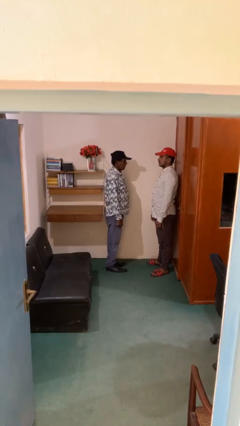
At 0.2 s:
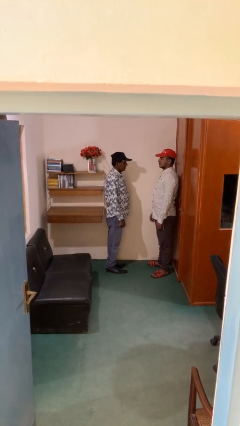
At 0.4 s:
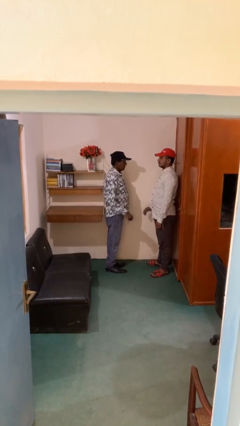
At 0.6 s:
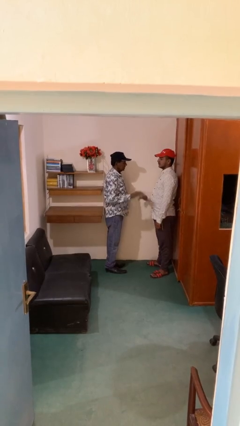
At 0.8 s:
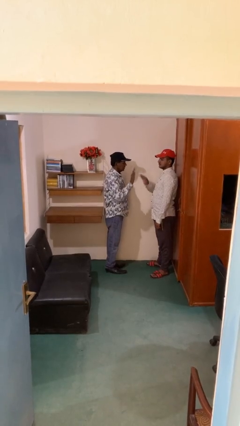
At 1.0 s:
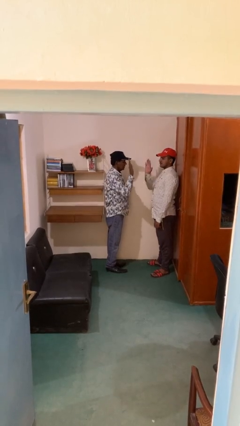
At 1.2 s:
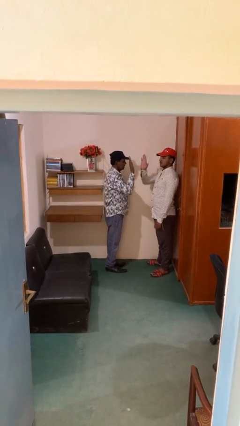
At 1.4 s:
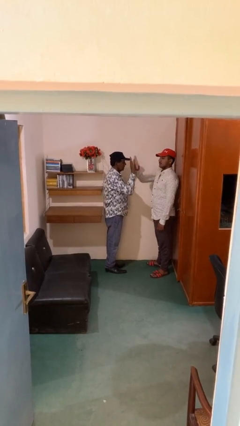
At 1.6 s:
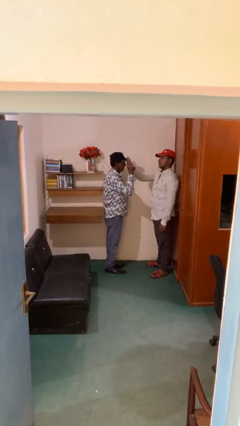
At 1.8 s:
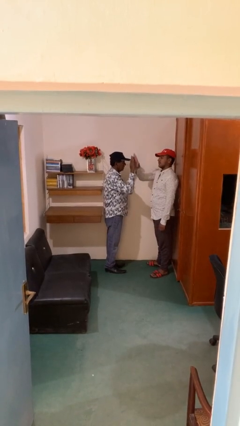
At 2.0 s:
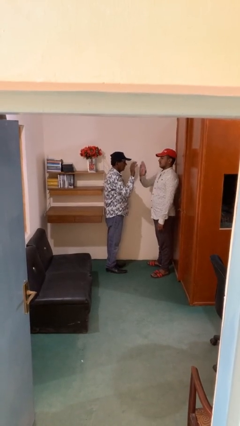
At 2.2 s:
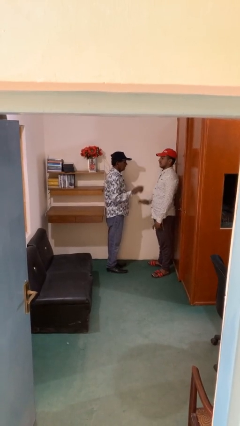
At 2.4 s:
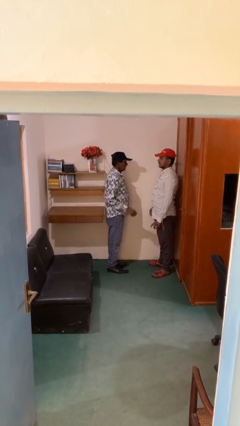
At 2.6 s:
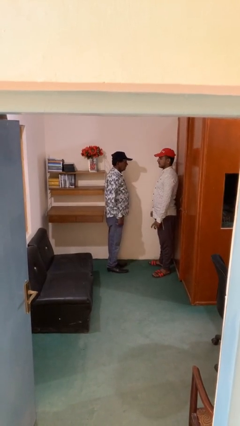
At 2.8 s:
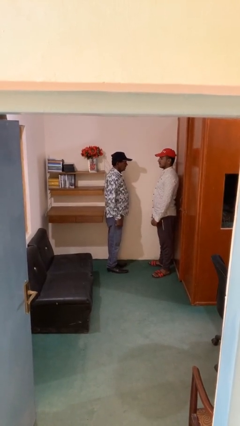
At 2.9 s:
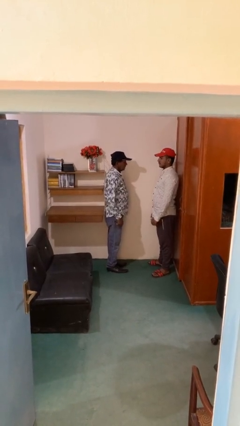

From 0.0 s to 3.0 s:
person highfives hand

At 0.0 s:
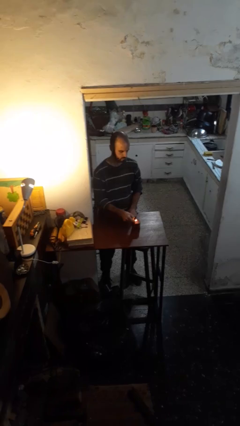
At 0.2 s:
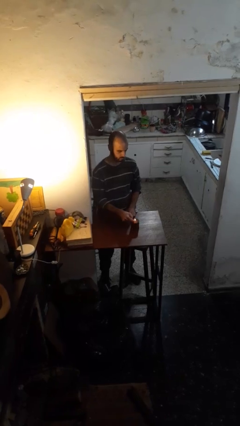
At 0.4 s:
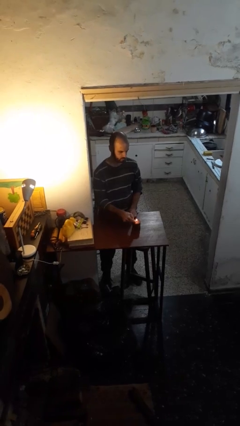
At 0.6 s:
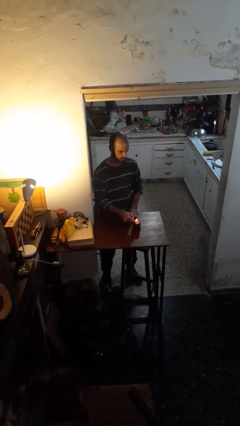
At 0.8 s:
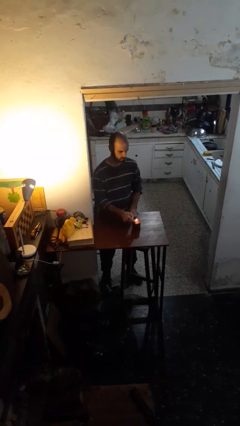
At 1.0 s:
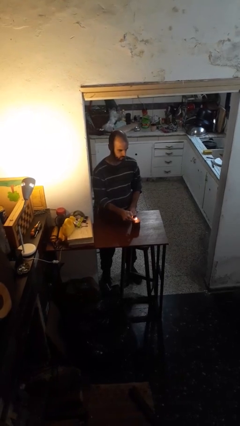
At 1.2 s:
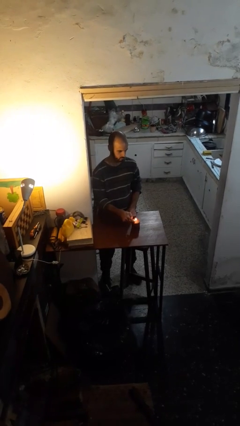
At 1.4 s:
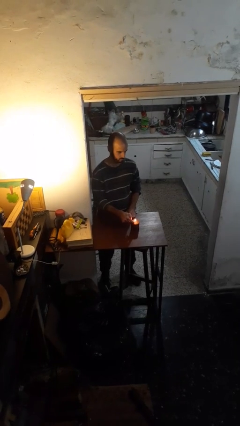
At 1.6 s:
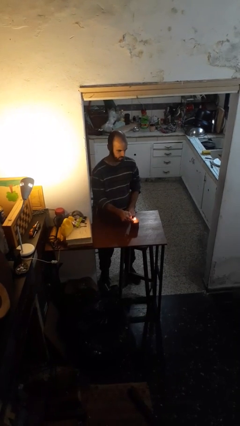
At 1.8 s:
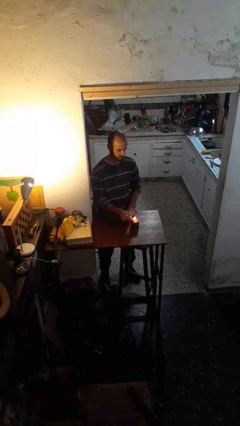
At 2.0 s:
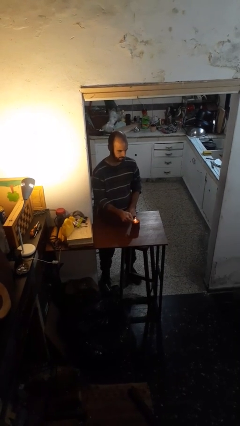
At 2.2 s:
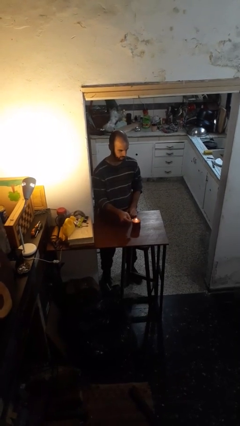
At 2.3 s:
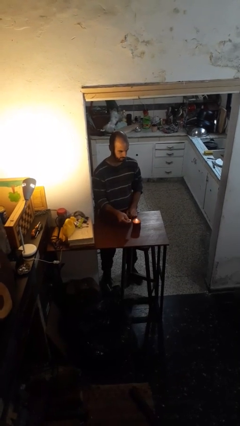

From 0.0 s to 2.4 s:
person lights candle

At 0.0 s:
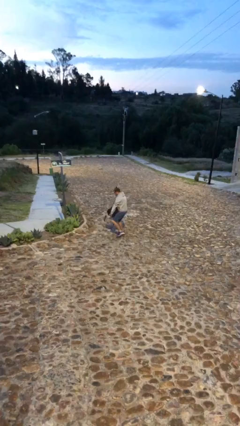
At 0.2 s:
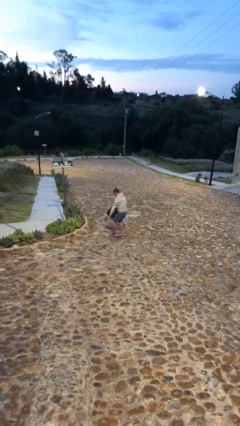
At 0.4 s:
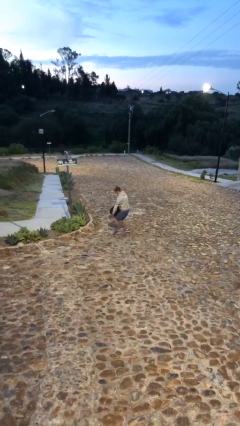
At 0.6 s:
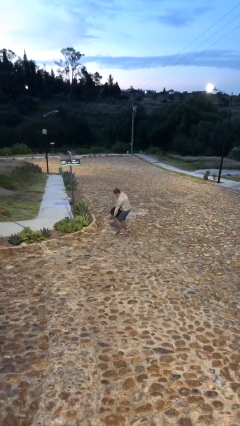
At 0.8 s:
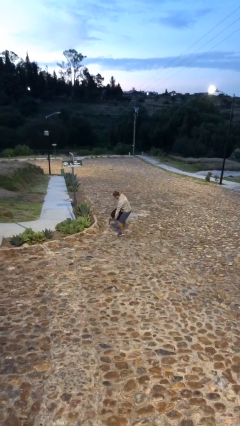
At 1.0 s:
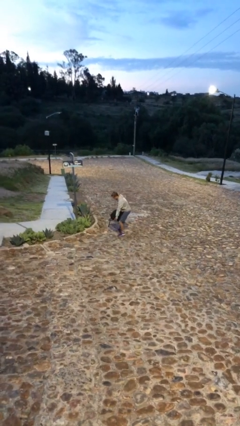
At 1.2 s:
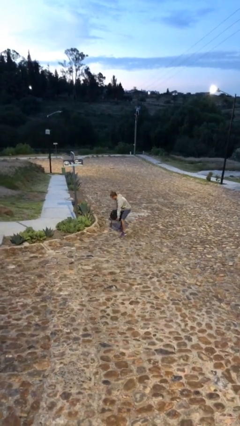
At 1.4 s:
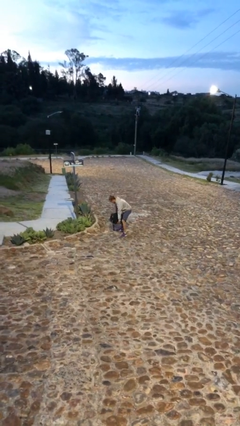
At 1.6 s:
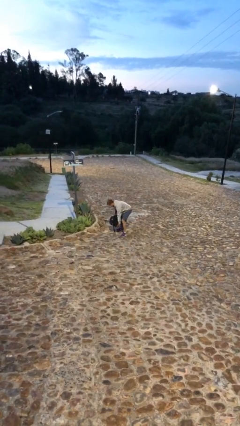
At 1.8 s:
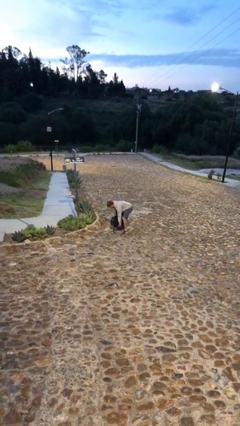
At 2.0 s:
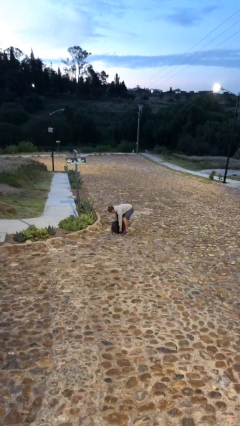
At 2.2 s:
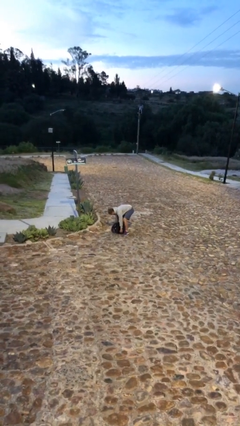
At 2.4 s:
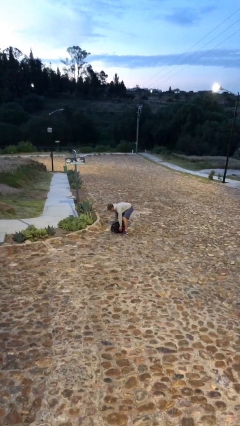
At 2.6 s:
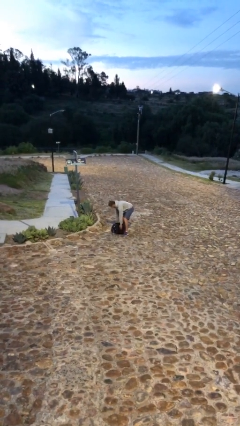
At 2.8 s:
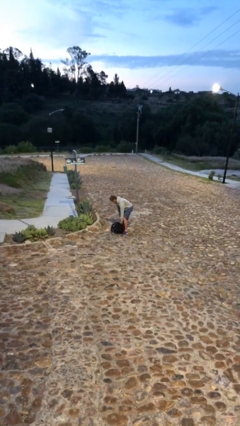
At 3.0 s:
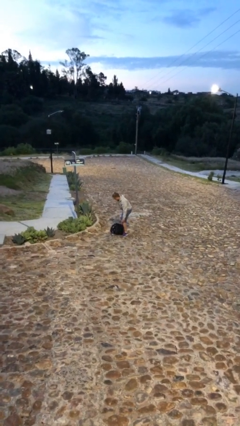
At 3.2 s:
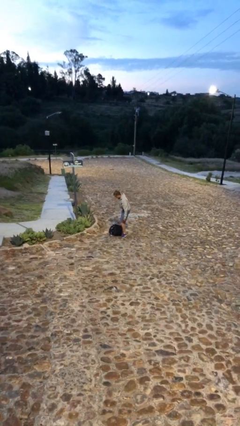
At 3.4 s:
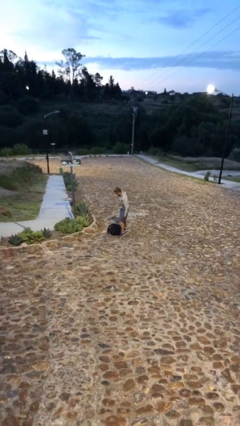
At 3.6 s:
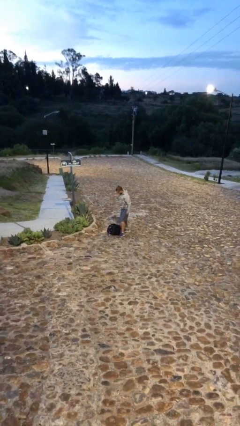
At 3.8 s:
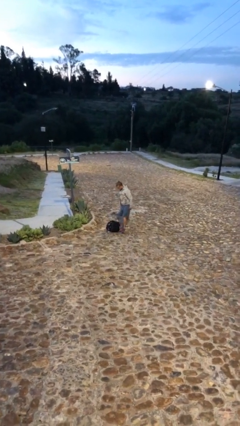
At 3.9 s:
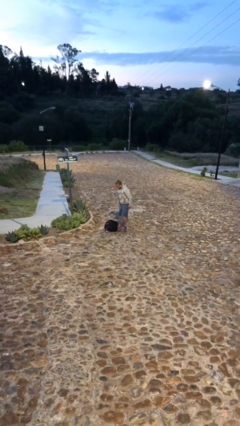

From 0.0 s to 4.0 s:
person puts down object on floor

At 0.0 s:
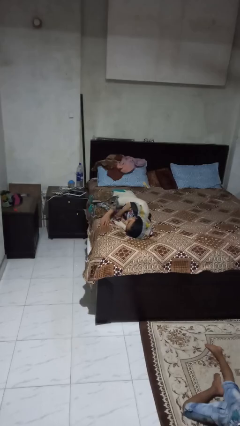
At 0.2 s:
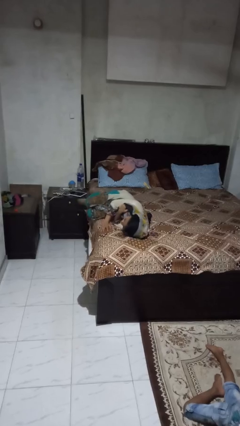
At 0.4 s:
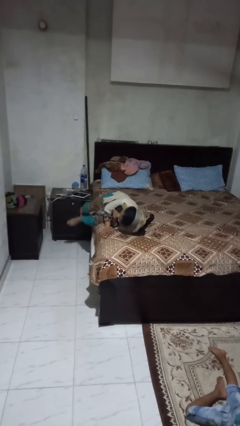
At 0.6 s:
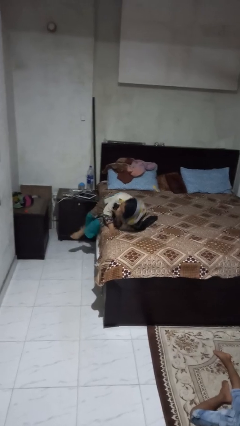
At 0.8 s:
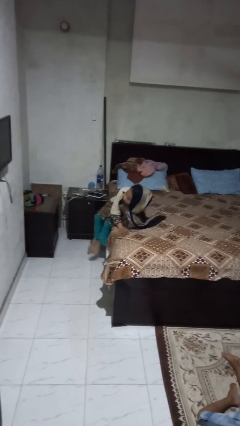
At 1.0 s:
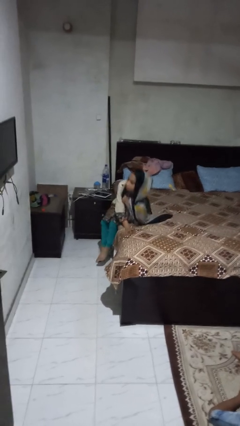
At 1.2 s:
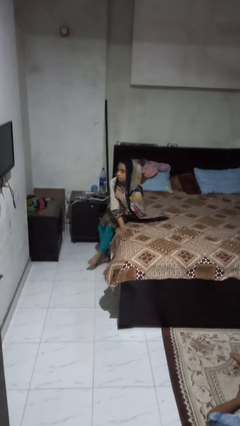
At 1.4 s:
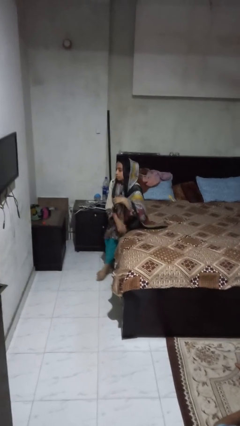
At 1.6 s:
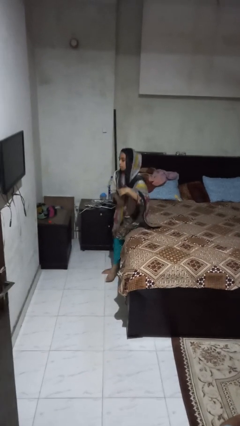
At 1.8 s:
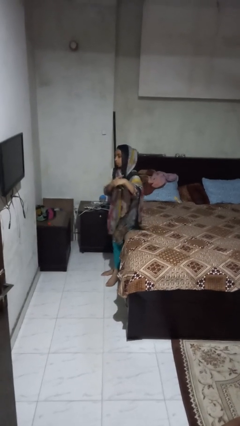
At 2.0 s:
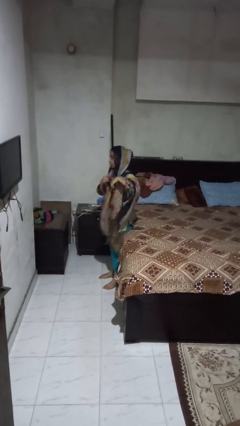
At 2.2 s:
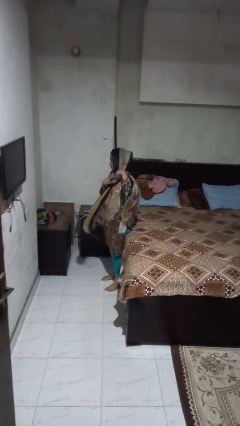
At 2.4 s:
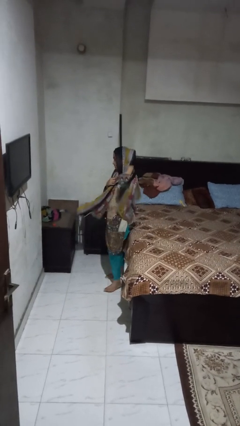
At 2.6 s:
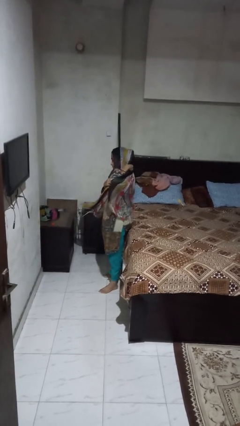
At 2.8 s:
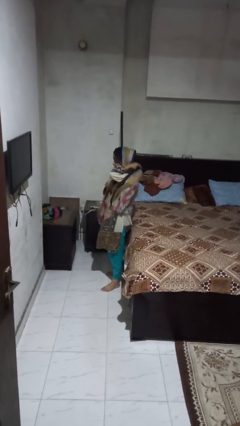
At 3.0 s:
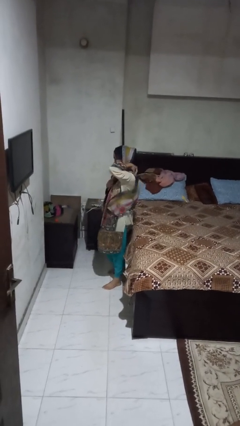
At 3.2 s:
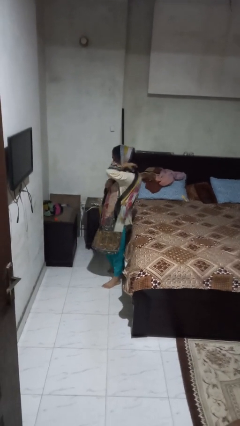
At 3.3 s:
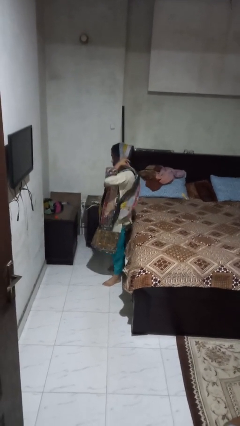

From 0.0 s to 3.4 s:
person stands up

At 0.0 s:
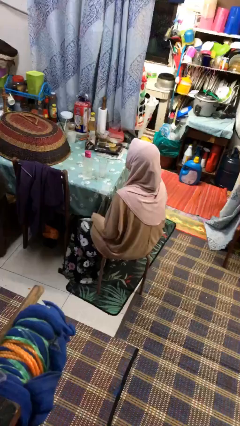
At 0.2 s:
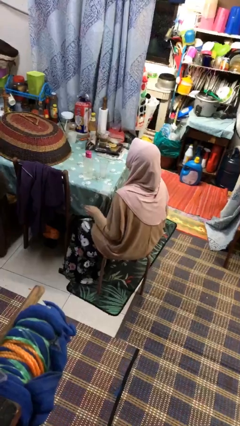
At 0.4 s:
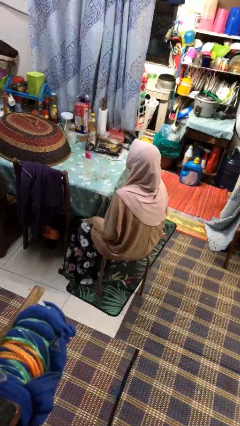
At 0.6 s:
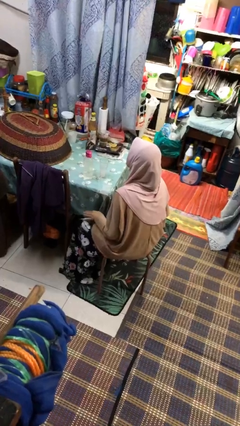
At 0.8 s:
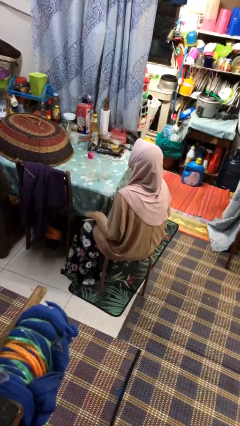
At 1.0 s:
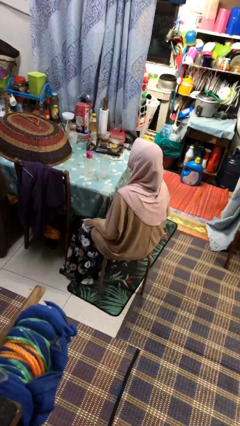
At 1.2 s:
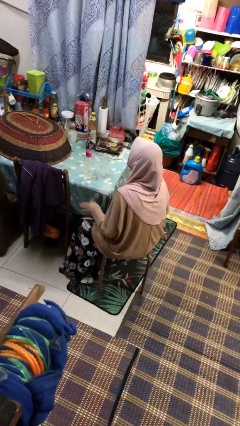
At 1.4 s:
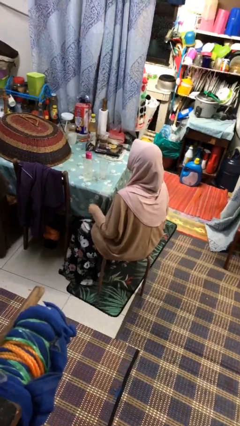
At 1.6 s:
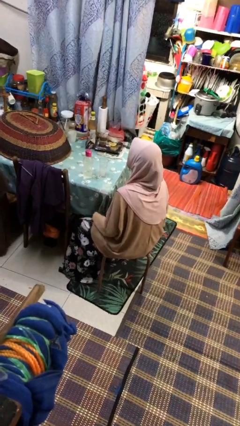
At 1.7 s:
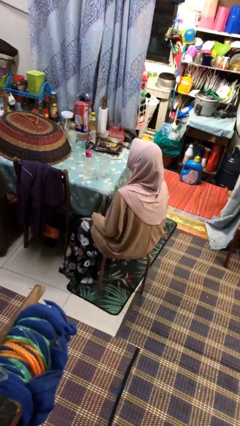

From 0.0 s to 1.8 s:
person slaps hands on thighs

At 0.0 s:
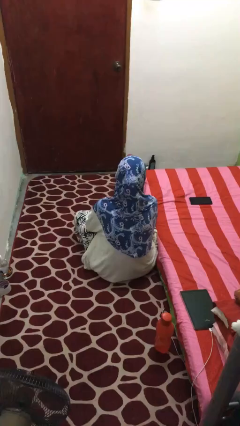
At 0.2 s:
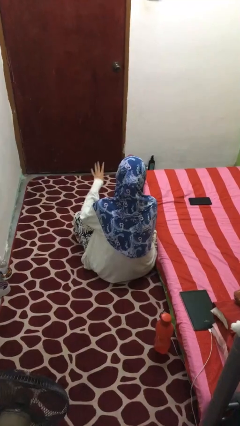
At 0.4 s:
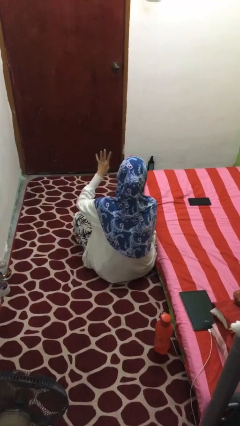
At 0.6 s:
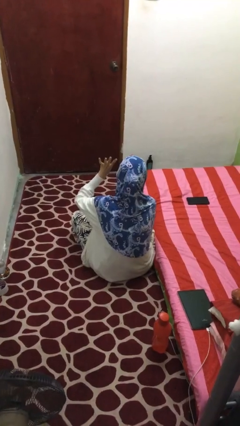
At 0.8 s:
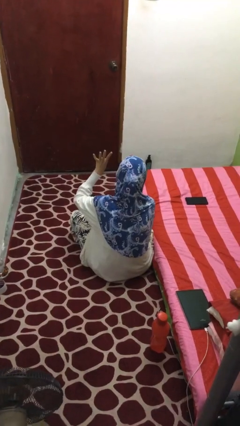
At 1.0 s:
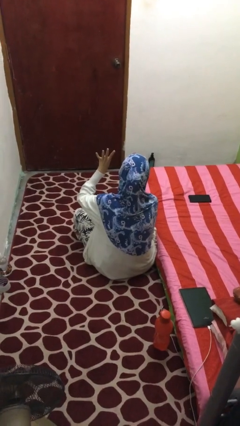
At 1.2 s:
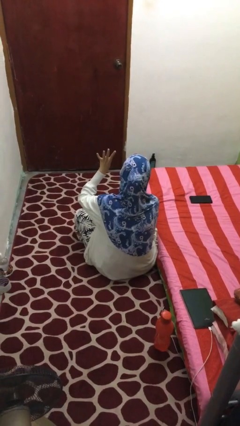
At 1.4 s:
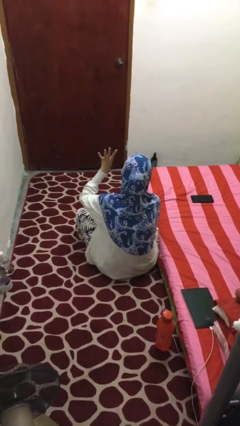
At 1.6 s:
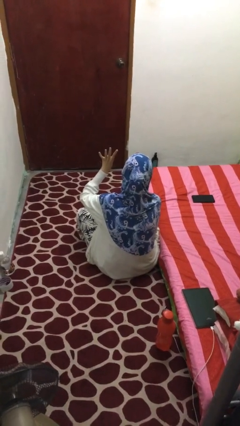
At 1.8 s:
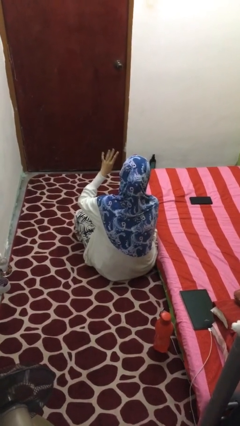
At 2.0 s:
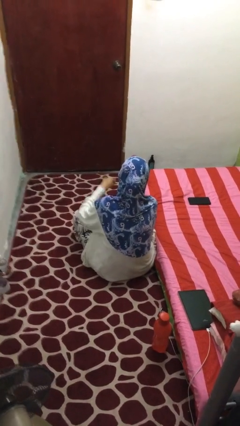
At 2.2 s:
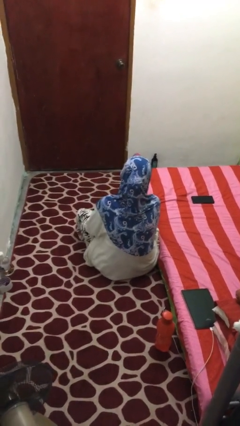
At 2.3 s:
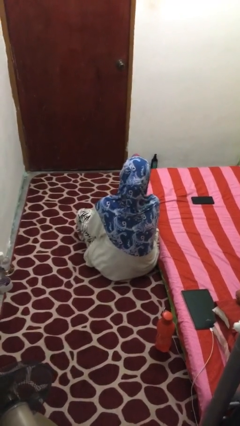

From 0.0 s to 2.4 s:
person gestures number four

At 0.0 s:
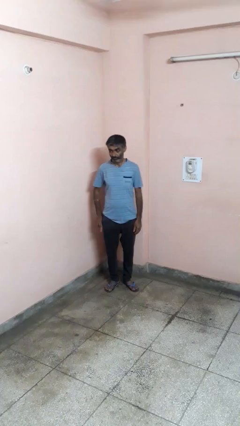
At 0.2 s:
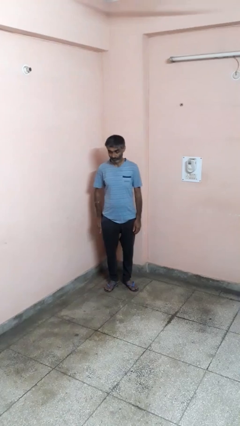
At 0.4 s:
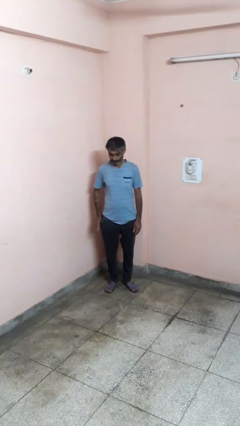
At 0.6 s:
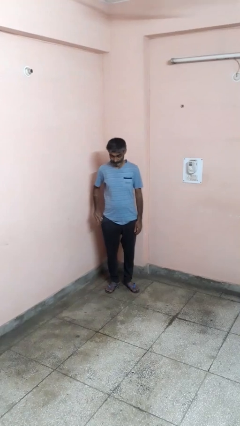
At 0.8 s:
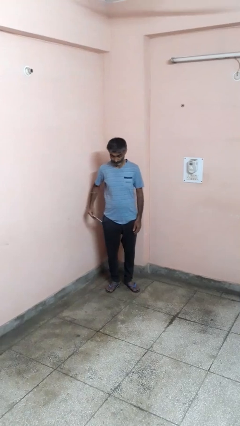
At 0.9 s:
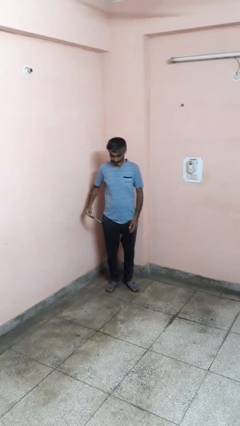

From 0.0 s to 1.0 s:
person takes phone from pocket
